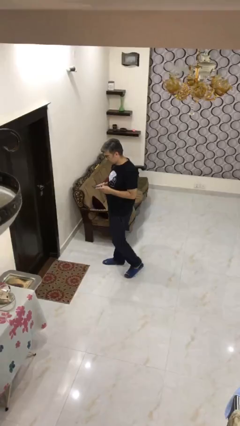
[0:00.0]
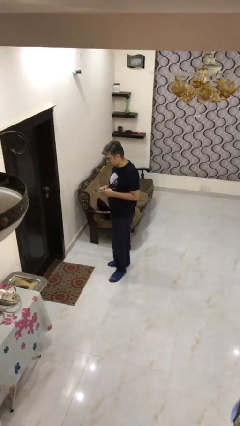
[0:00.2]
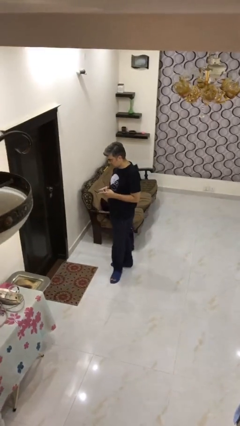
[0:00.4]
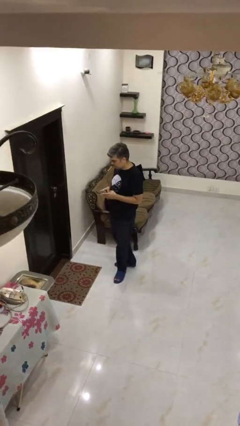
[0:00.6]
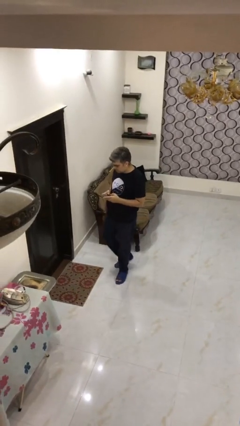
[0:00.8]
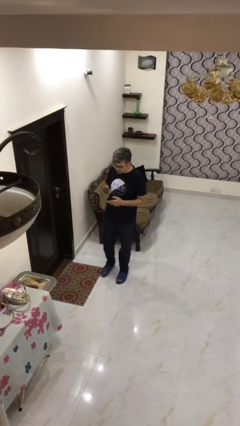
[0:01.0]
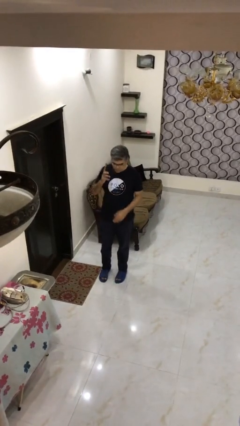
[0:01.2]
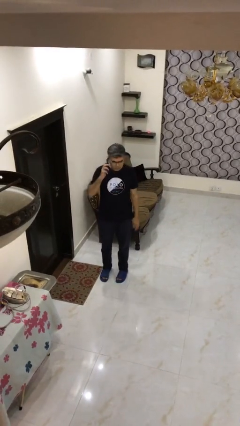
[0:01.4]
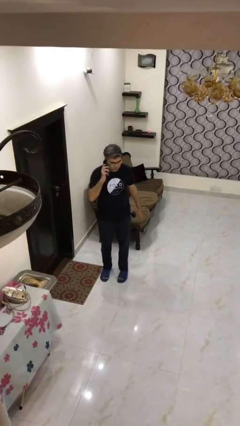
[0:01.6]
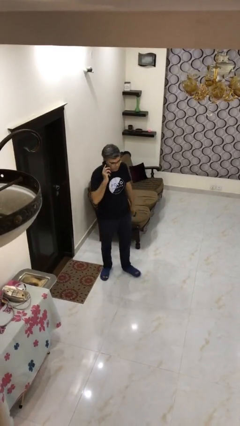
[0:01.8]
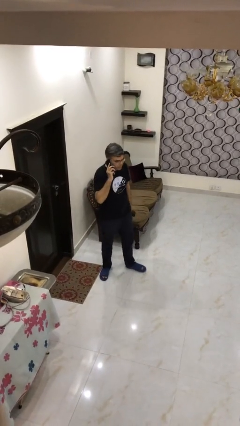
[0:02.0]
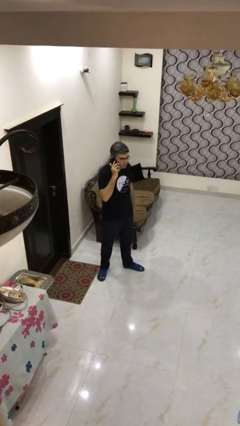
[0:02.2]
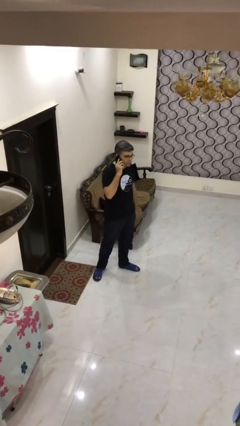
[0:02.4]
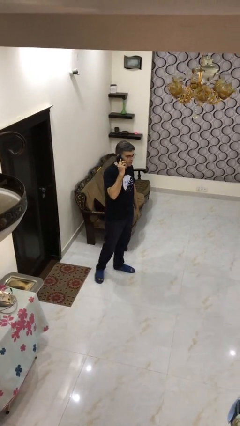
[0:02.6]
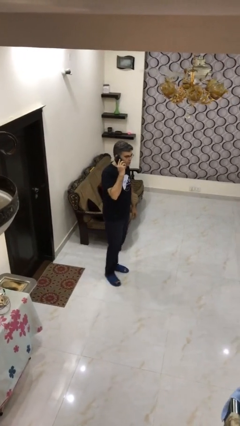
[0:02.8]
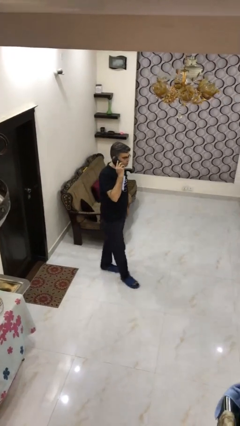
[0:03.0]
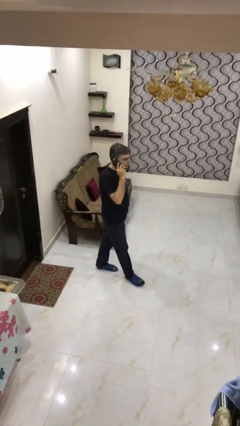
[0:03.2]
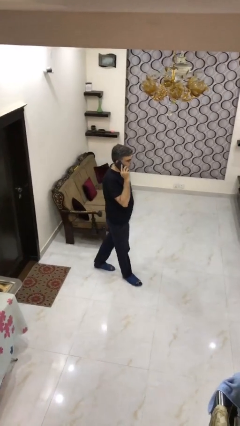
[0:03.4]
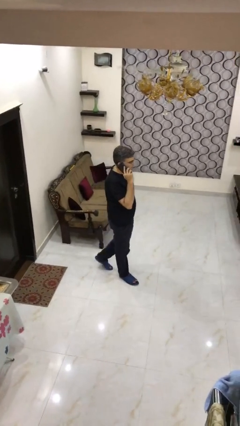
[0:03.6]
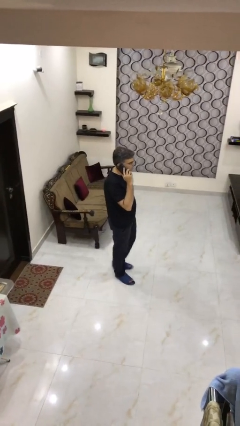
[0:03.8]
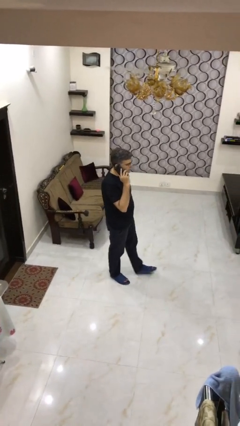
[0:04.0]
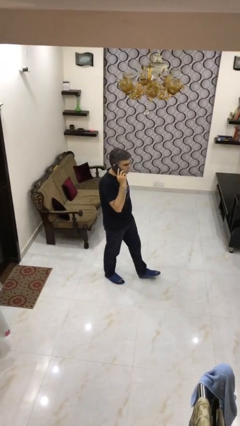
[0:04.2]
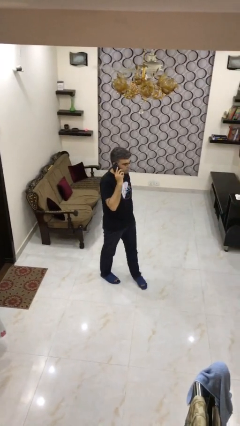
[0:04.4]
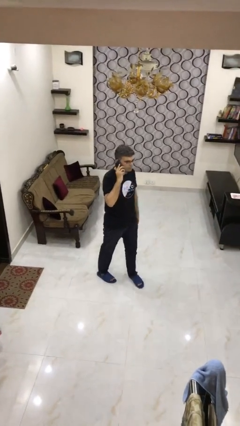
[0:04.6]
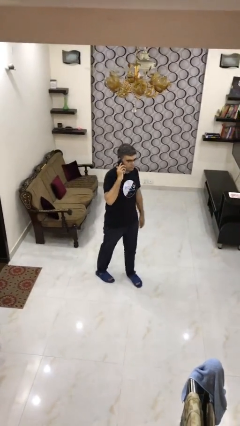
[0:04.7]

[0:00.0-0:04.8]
person talks on phone

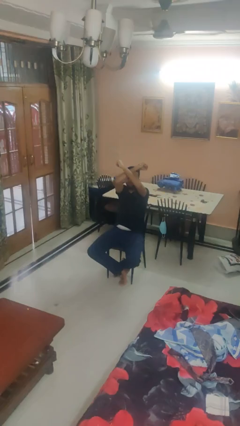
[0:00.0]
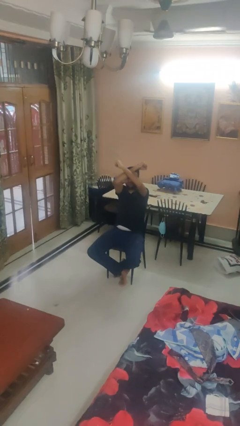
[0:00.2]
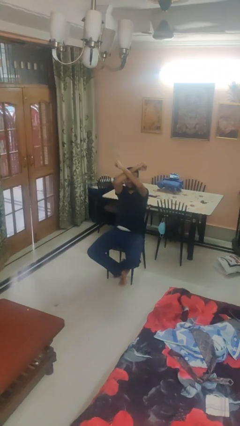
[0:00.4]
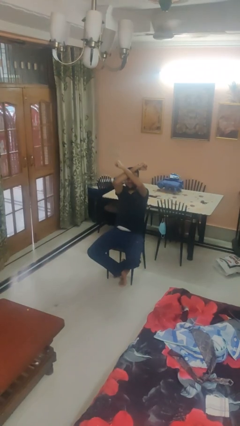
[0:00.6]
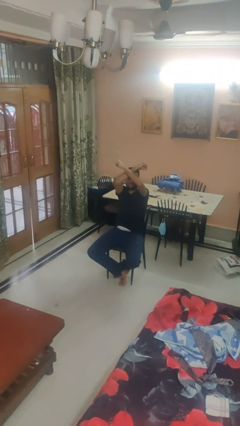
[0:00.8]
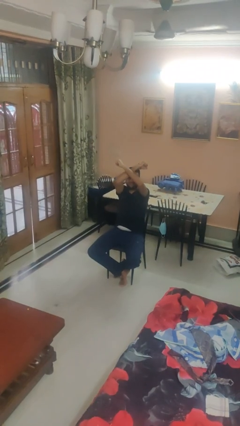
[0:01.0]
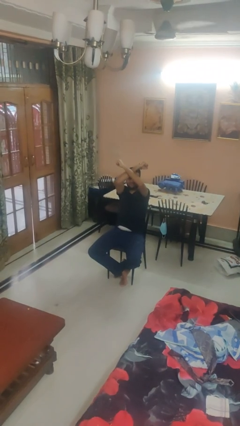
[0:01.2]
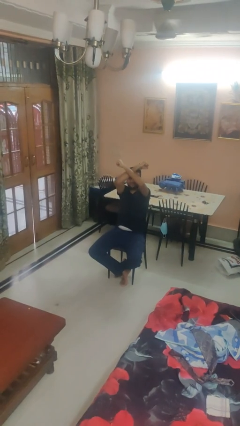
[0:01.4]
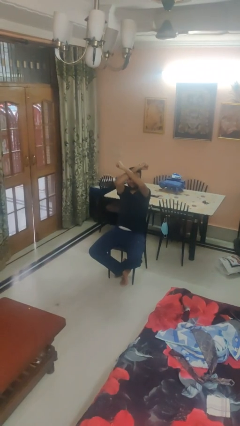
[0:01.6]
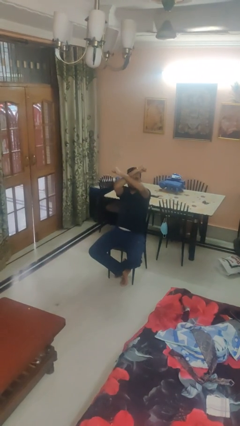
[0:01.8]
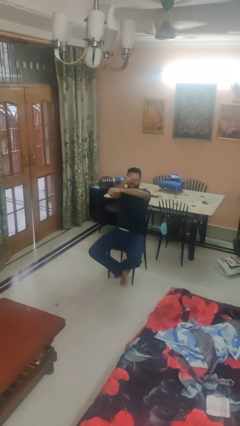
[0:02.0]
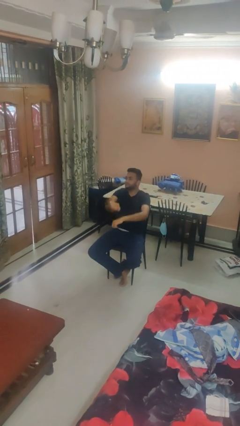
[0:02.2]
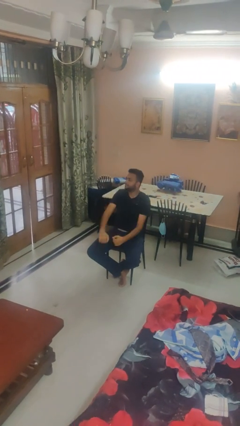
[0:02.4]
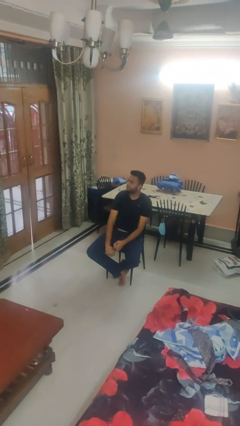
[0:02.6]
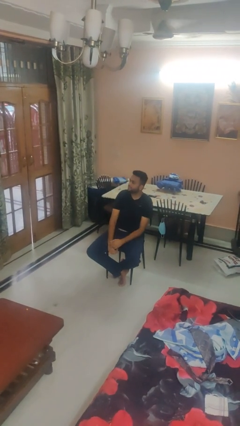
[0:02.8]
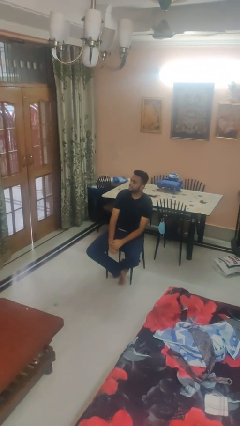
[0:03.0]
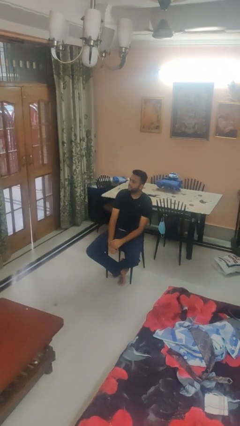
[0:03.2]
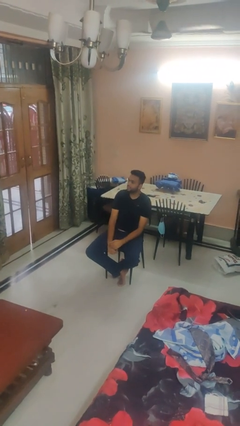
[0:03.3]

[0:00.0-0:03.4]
person gestures arms x

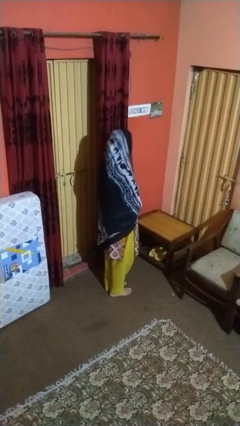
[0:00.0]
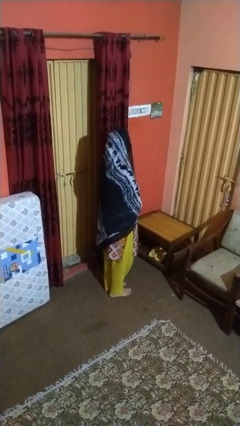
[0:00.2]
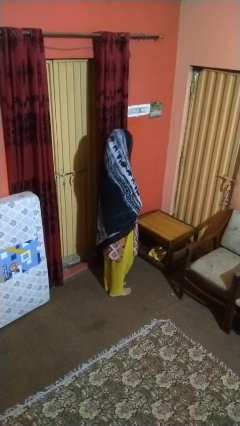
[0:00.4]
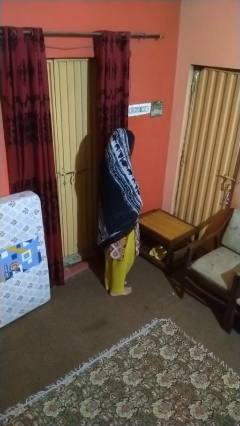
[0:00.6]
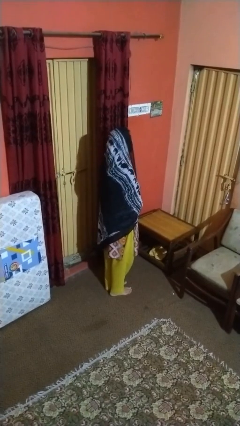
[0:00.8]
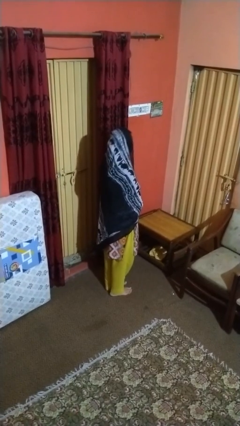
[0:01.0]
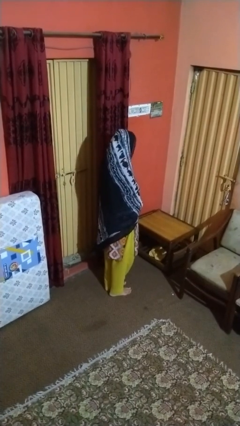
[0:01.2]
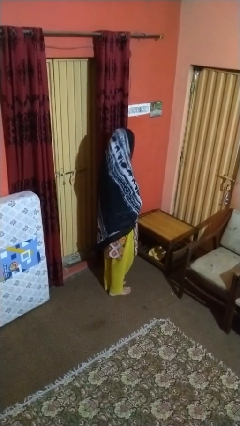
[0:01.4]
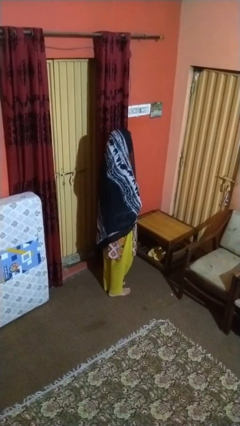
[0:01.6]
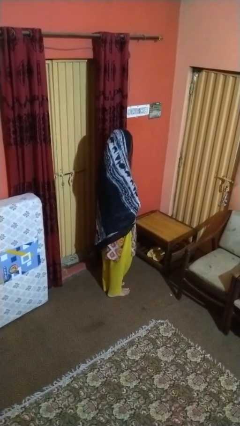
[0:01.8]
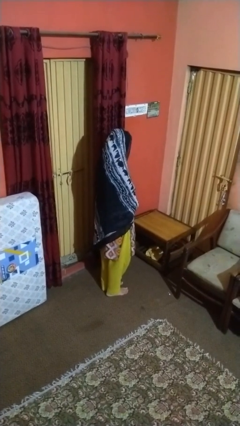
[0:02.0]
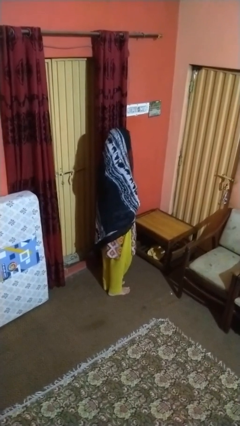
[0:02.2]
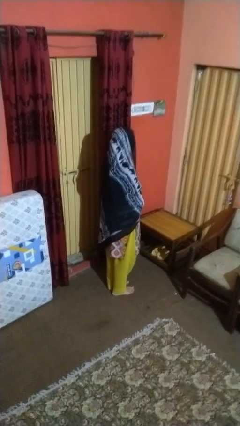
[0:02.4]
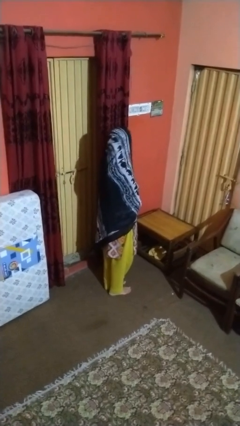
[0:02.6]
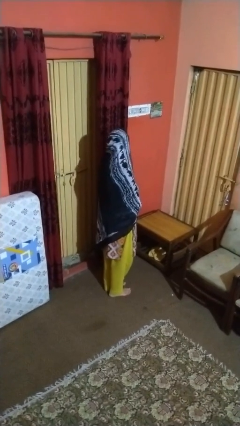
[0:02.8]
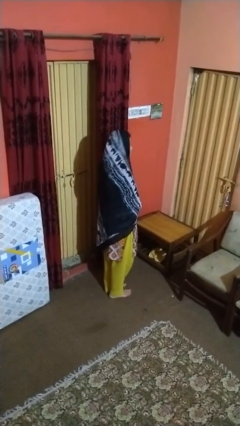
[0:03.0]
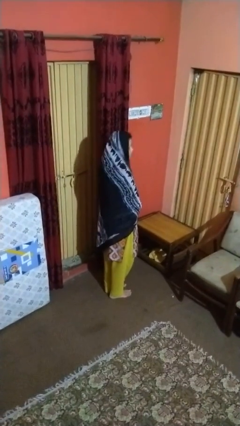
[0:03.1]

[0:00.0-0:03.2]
person nods head

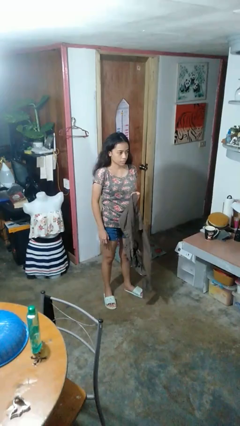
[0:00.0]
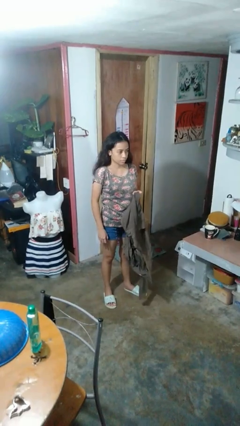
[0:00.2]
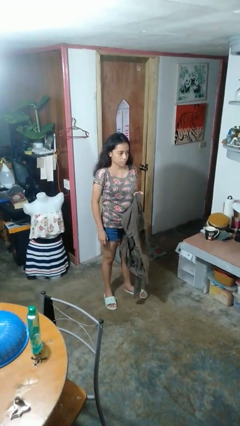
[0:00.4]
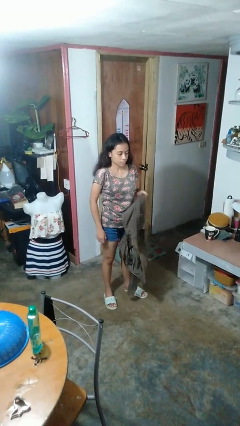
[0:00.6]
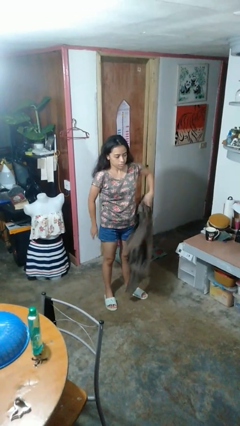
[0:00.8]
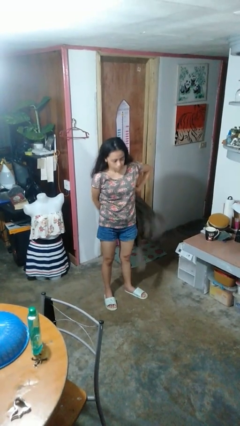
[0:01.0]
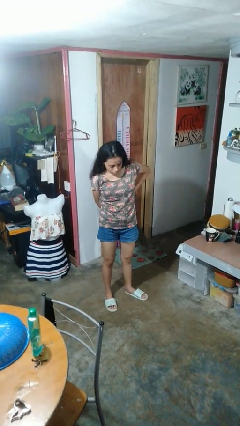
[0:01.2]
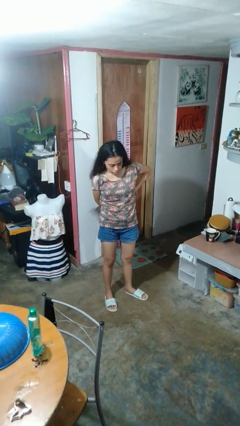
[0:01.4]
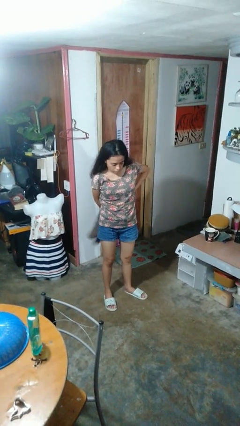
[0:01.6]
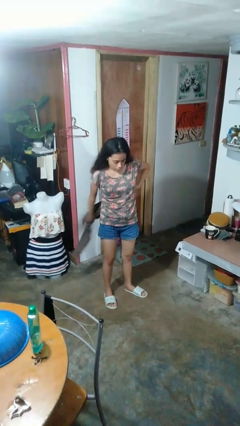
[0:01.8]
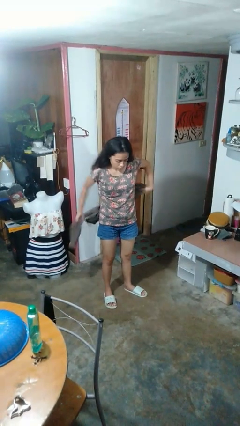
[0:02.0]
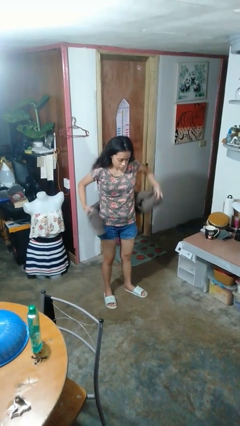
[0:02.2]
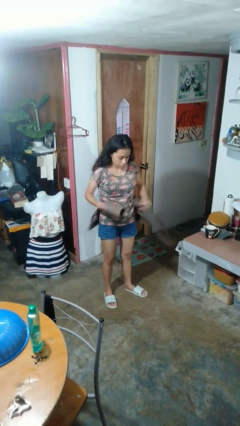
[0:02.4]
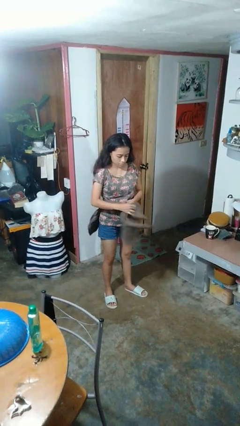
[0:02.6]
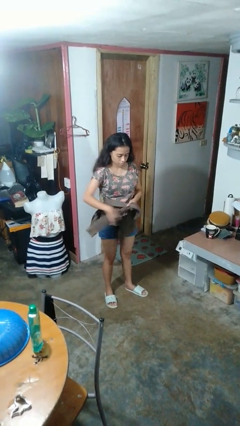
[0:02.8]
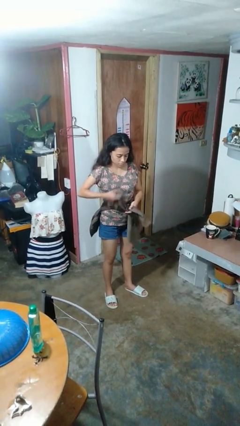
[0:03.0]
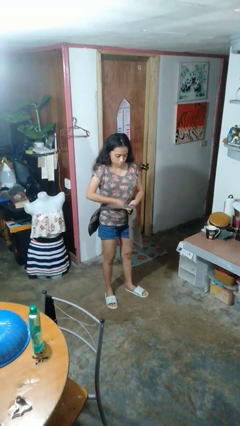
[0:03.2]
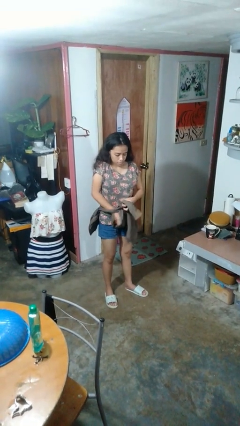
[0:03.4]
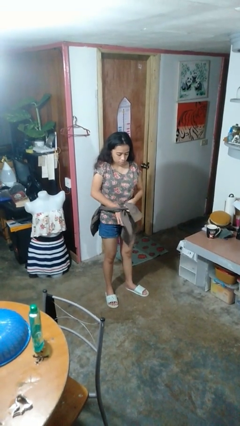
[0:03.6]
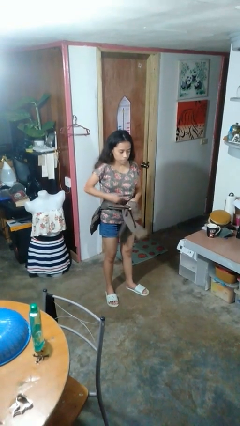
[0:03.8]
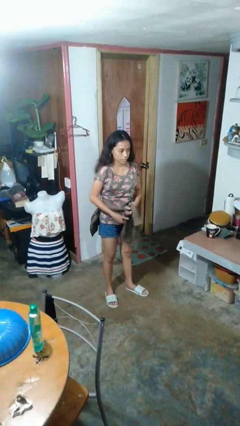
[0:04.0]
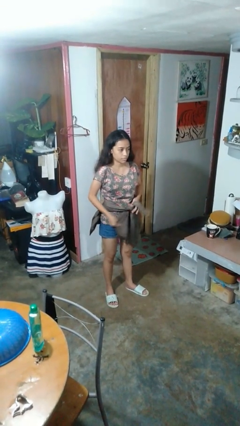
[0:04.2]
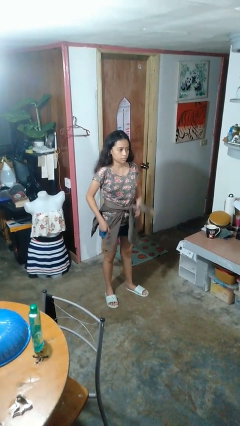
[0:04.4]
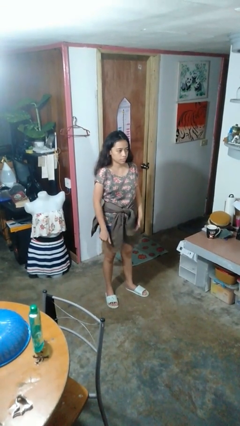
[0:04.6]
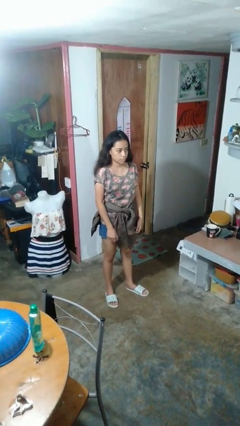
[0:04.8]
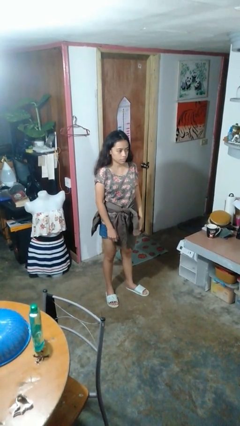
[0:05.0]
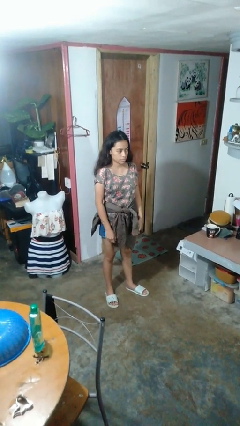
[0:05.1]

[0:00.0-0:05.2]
person ties jacket around waist

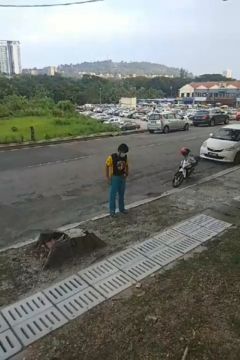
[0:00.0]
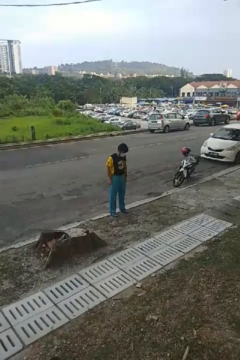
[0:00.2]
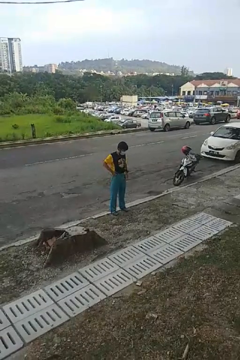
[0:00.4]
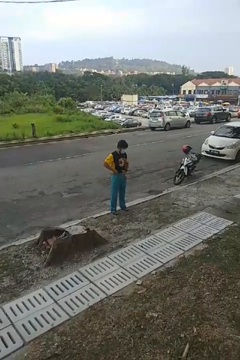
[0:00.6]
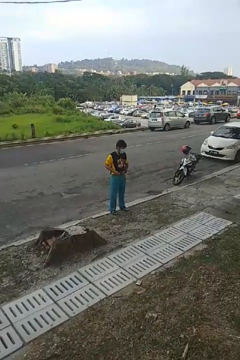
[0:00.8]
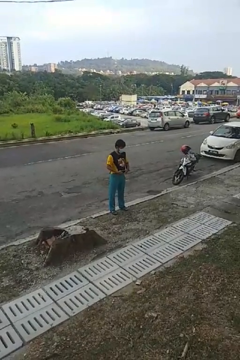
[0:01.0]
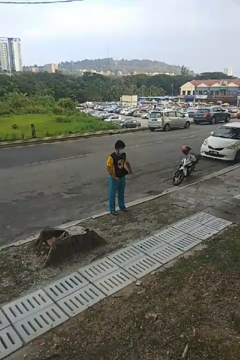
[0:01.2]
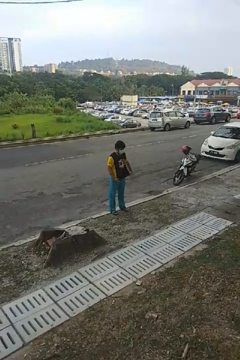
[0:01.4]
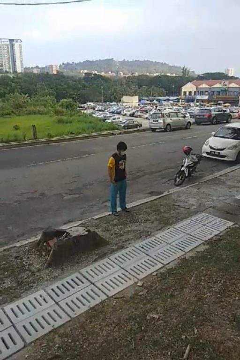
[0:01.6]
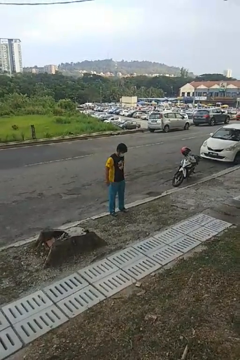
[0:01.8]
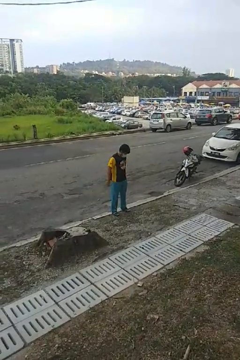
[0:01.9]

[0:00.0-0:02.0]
person untucks shirt
